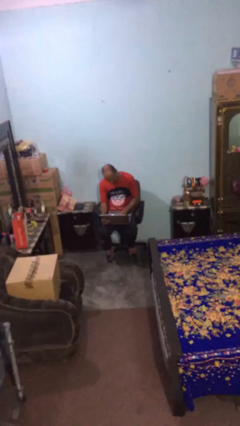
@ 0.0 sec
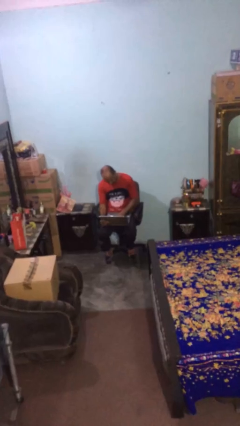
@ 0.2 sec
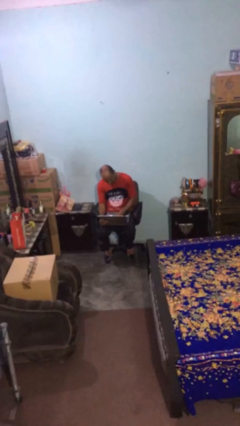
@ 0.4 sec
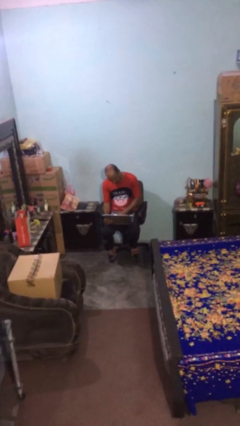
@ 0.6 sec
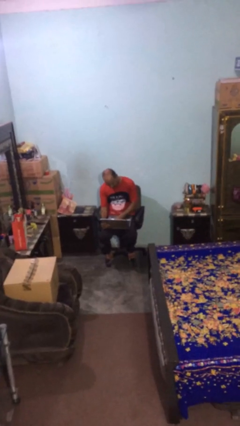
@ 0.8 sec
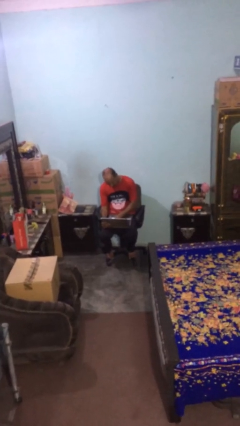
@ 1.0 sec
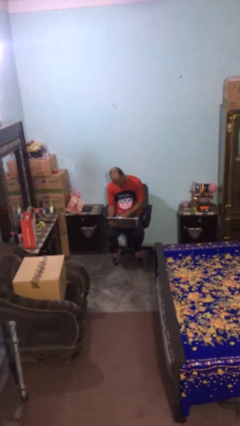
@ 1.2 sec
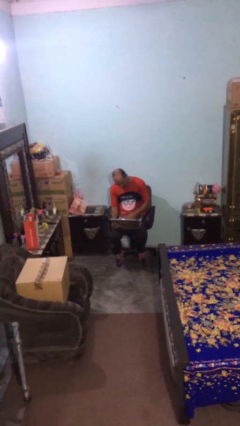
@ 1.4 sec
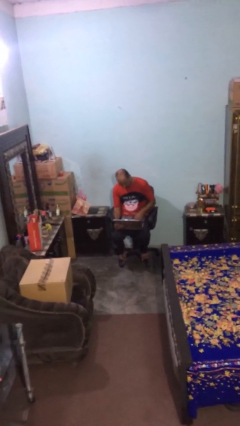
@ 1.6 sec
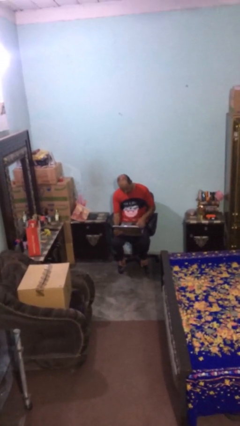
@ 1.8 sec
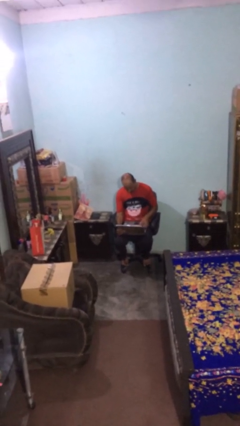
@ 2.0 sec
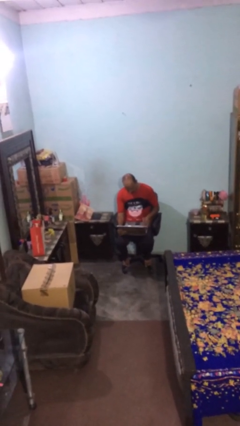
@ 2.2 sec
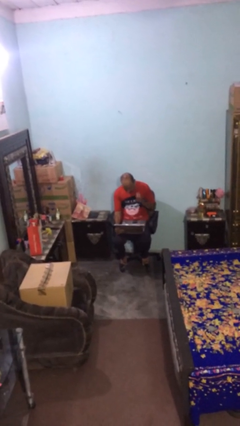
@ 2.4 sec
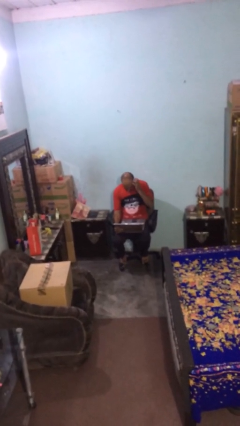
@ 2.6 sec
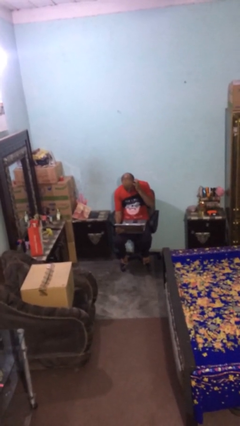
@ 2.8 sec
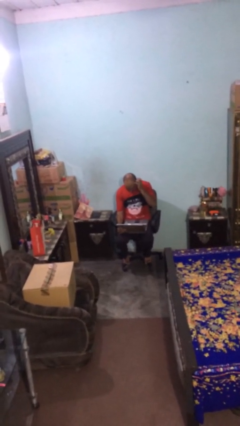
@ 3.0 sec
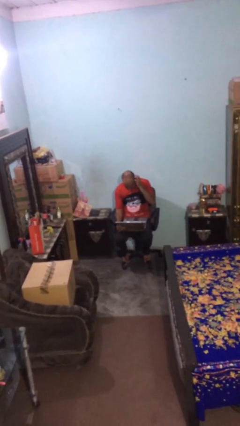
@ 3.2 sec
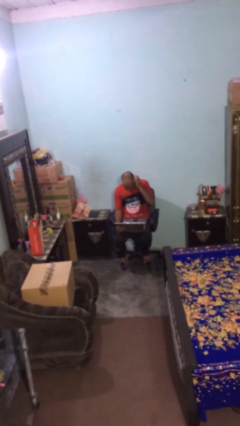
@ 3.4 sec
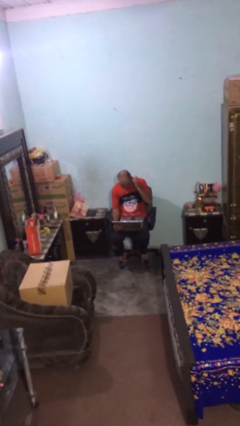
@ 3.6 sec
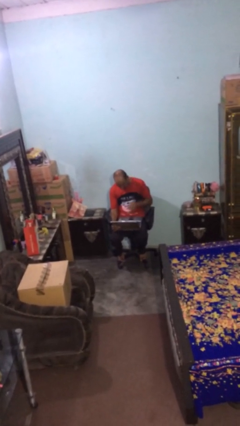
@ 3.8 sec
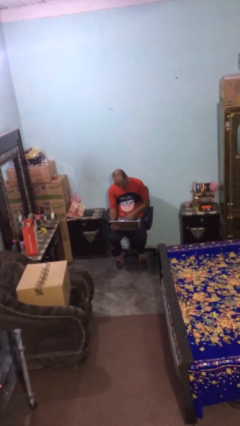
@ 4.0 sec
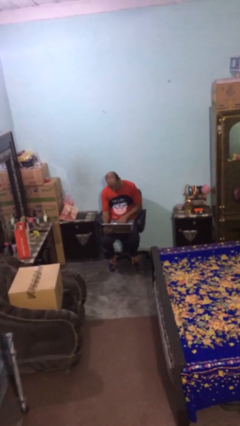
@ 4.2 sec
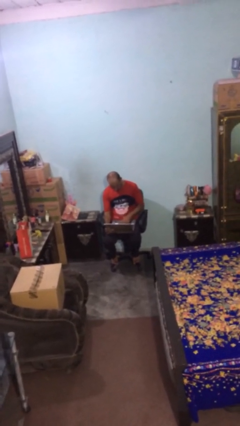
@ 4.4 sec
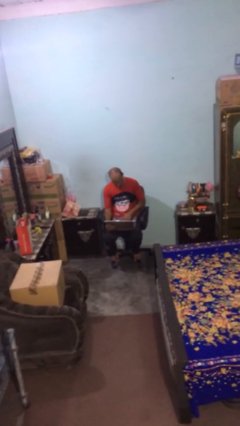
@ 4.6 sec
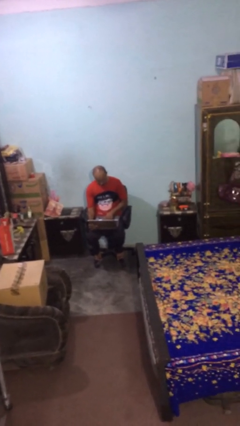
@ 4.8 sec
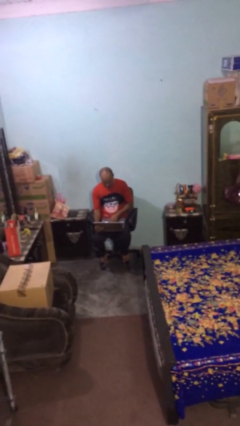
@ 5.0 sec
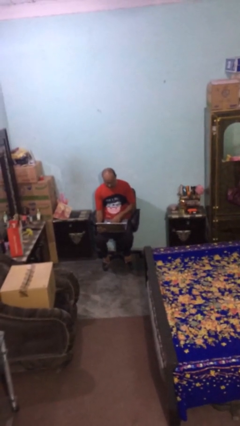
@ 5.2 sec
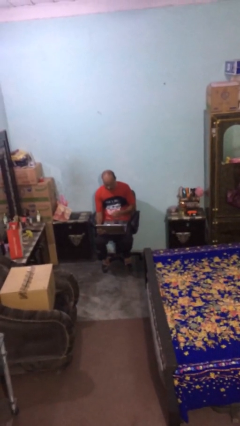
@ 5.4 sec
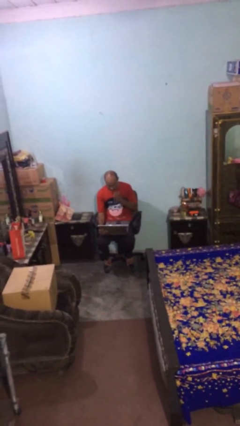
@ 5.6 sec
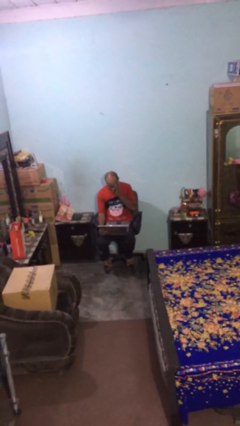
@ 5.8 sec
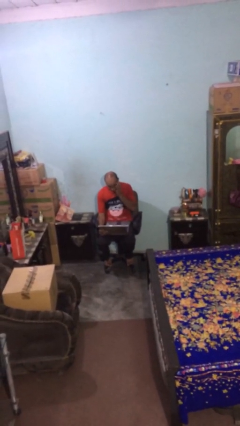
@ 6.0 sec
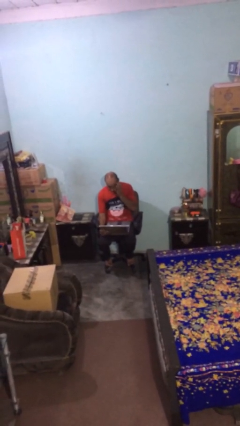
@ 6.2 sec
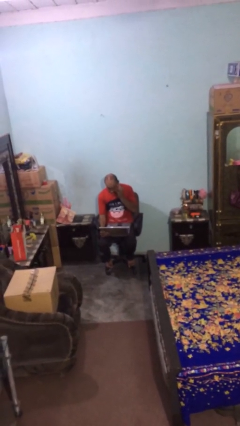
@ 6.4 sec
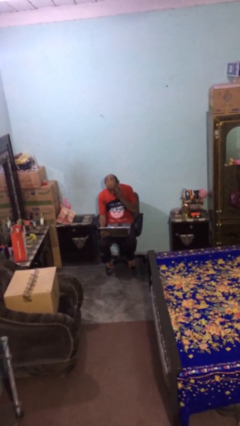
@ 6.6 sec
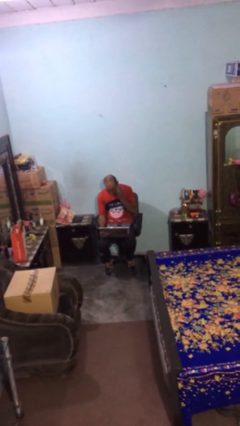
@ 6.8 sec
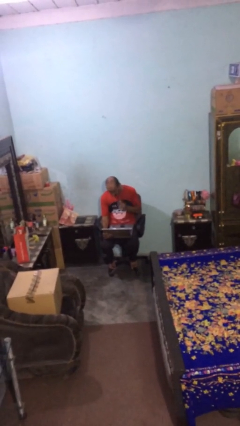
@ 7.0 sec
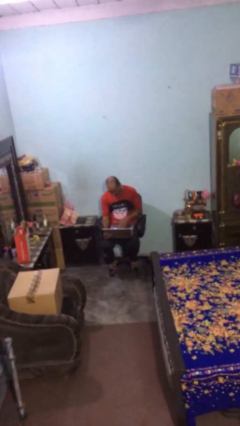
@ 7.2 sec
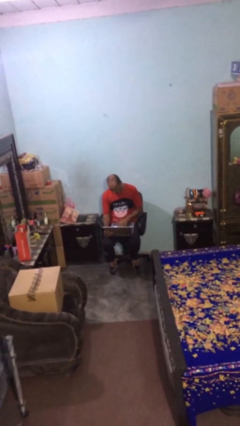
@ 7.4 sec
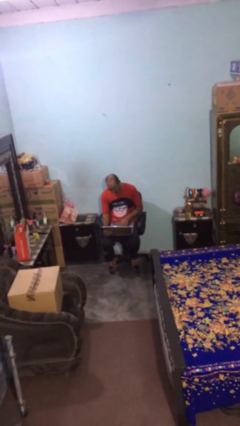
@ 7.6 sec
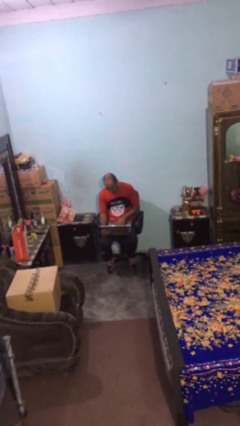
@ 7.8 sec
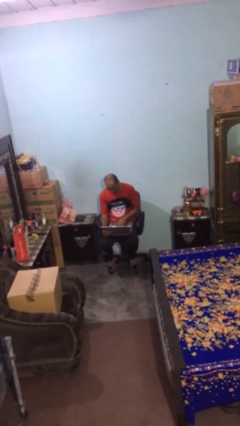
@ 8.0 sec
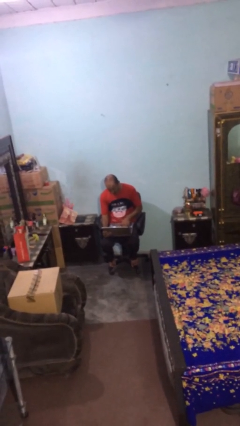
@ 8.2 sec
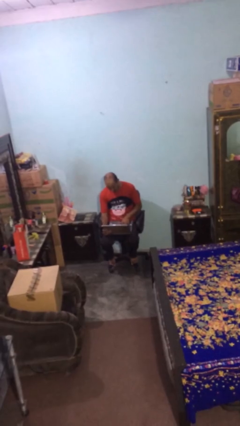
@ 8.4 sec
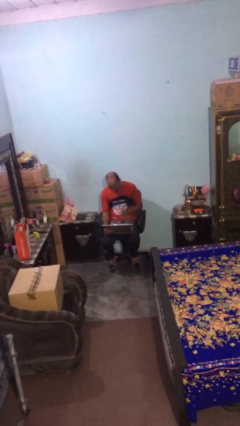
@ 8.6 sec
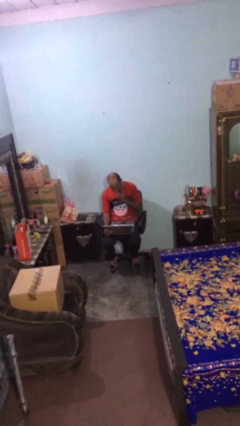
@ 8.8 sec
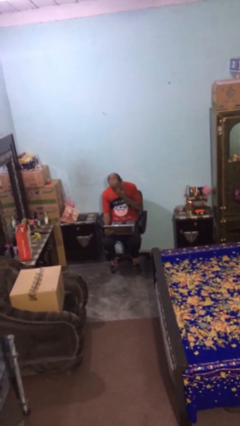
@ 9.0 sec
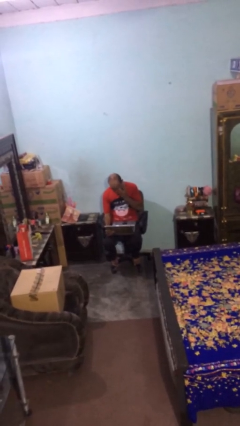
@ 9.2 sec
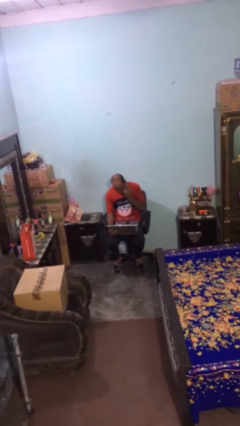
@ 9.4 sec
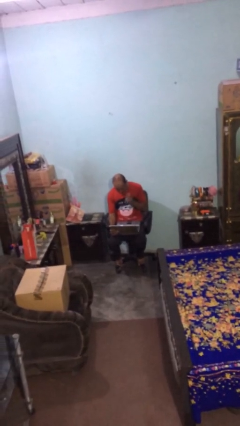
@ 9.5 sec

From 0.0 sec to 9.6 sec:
person interacts with laptop

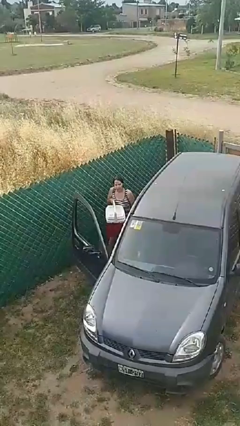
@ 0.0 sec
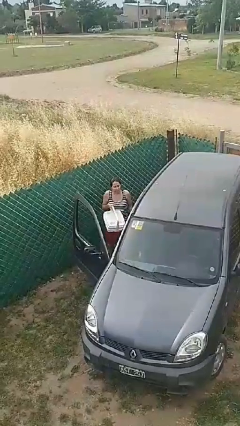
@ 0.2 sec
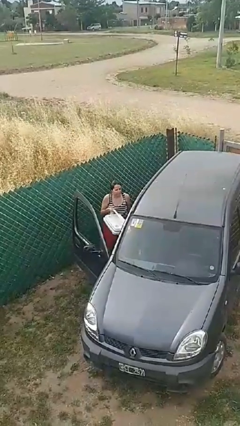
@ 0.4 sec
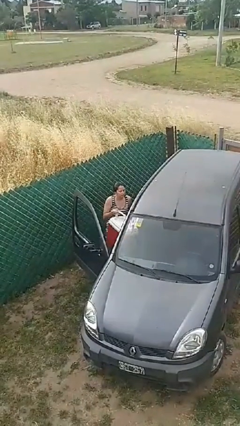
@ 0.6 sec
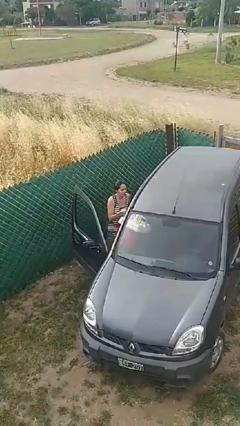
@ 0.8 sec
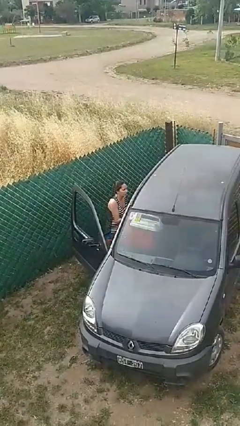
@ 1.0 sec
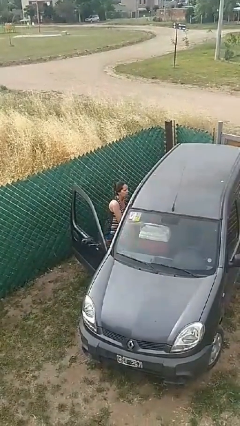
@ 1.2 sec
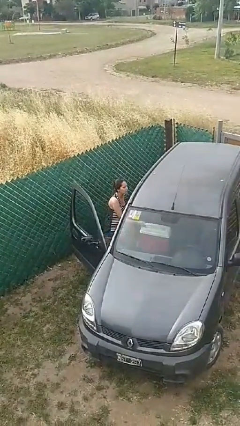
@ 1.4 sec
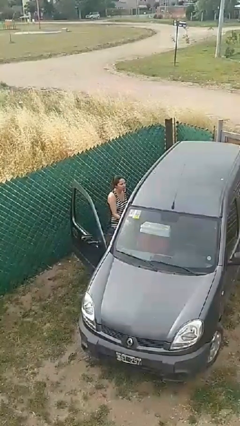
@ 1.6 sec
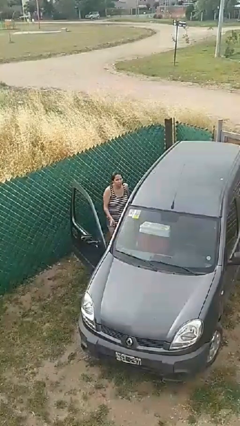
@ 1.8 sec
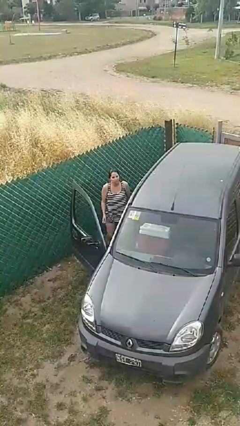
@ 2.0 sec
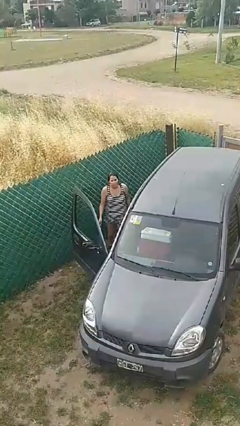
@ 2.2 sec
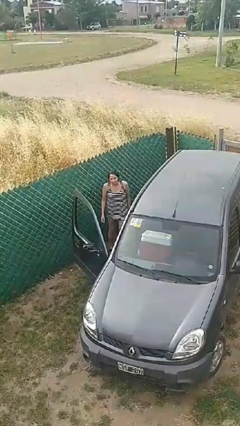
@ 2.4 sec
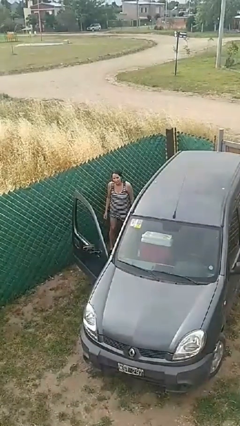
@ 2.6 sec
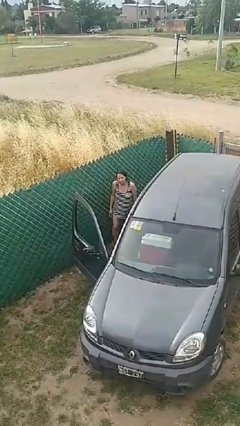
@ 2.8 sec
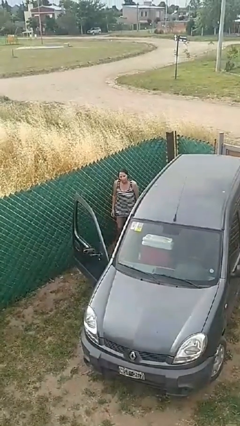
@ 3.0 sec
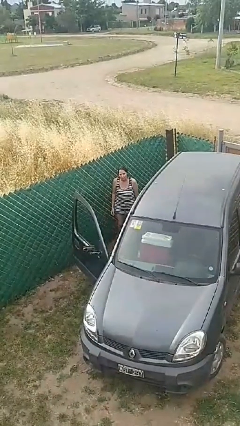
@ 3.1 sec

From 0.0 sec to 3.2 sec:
person loads car

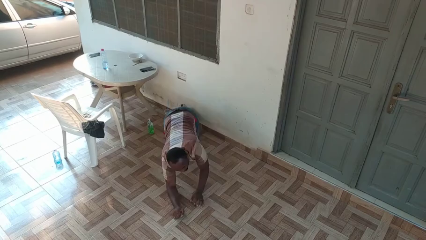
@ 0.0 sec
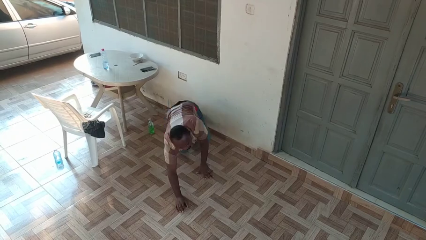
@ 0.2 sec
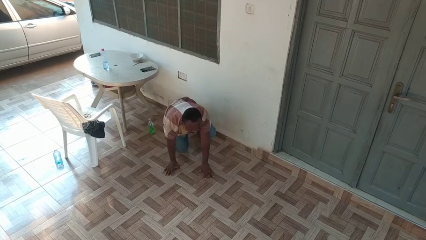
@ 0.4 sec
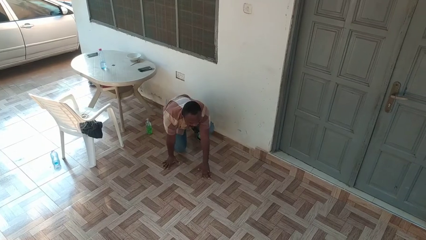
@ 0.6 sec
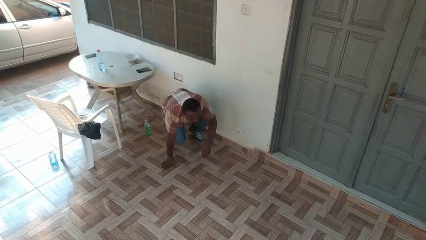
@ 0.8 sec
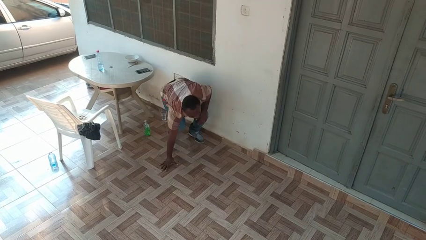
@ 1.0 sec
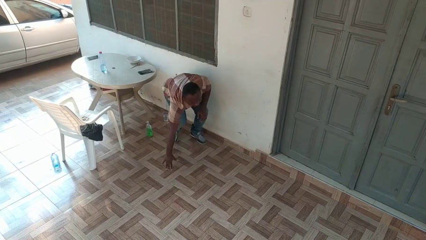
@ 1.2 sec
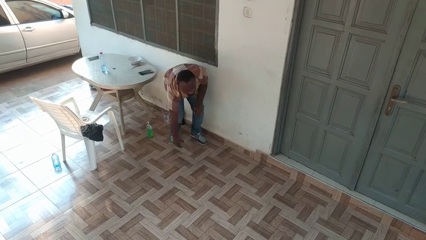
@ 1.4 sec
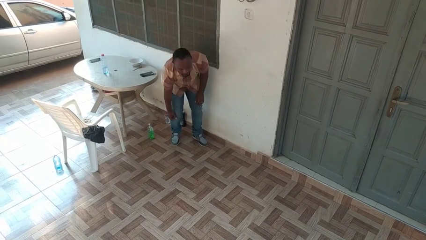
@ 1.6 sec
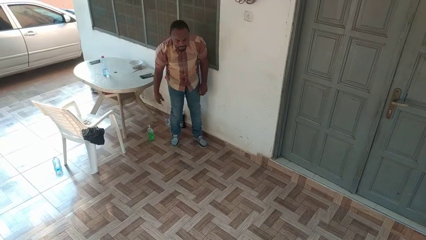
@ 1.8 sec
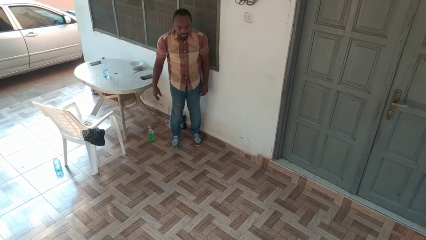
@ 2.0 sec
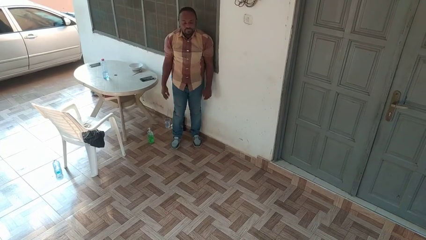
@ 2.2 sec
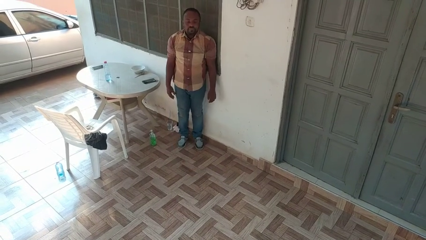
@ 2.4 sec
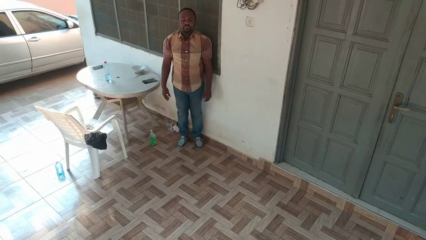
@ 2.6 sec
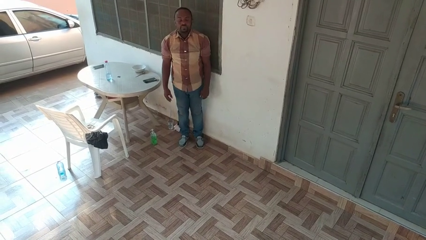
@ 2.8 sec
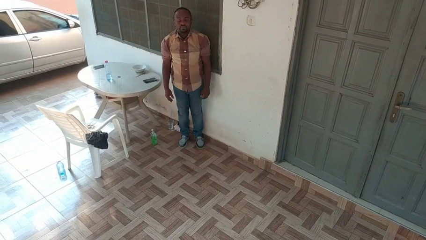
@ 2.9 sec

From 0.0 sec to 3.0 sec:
person stands up from floor

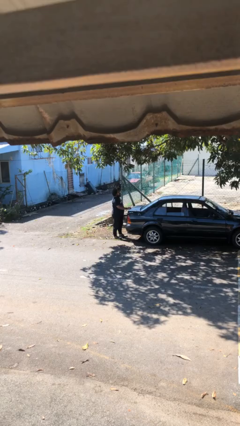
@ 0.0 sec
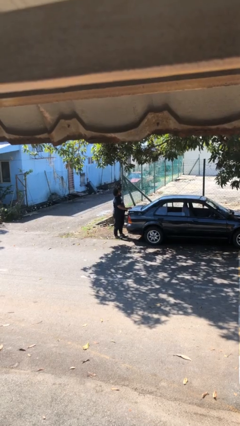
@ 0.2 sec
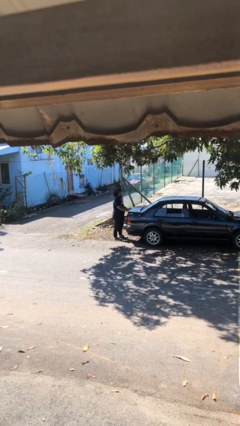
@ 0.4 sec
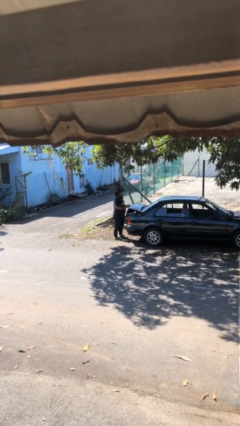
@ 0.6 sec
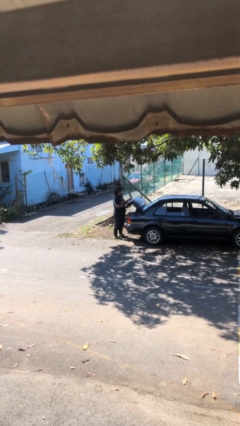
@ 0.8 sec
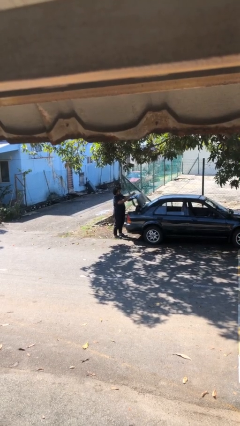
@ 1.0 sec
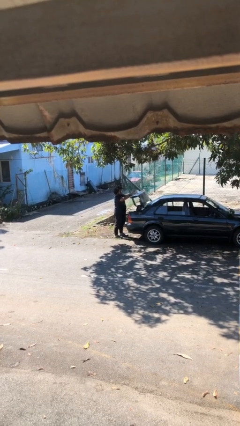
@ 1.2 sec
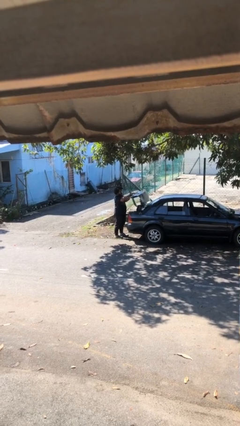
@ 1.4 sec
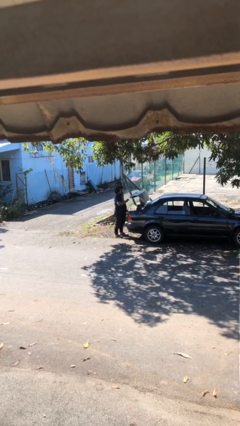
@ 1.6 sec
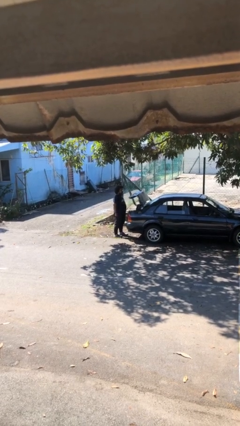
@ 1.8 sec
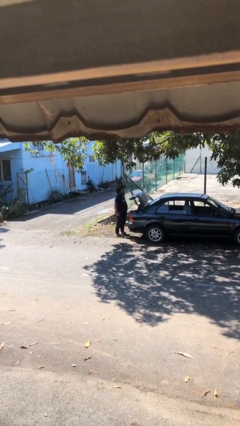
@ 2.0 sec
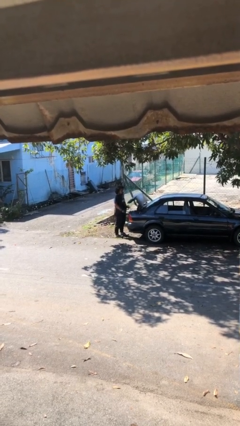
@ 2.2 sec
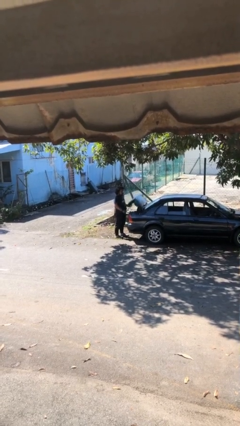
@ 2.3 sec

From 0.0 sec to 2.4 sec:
person opens car trunk
